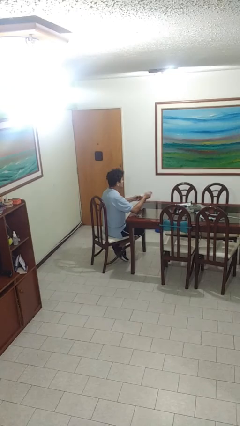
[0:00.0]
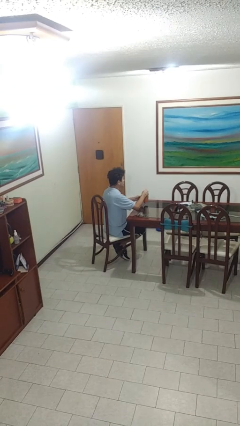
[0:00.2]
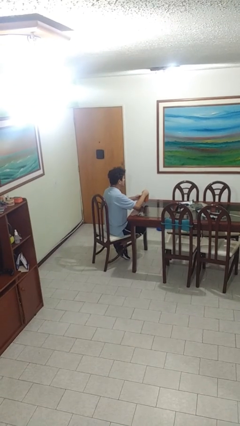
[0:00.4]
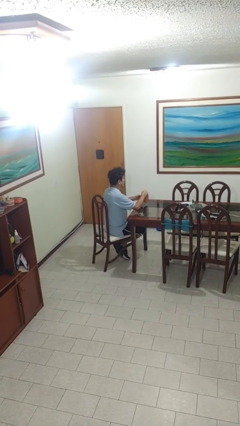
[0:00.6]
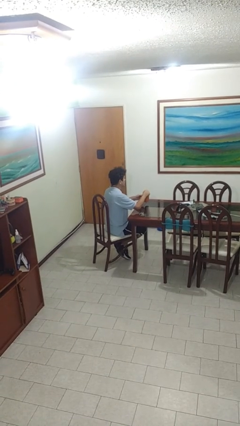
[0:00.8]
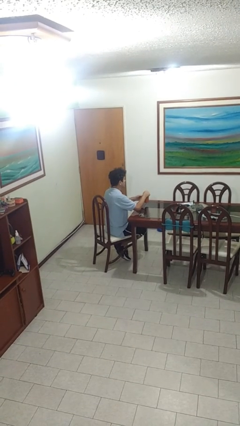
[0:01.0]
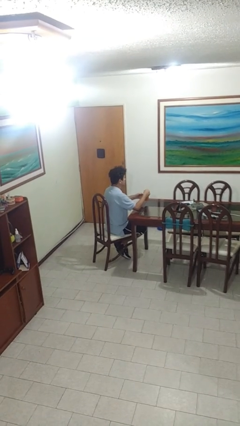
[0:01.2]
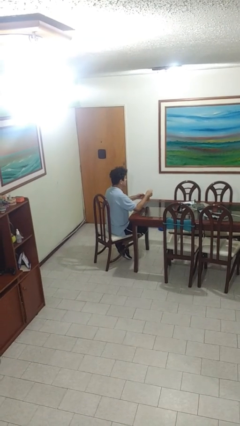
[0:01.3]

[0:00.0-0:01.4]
person stirs mug

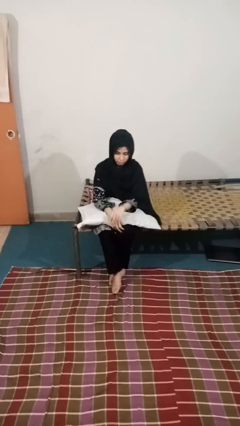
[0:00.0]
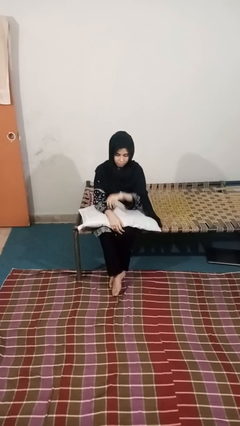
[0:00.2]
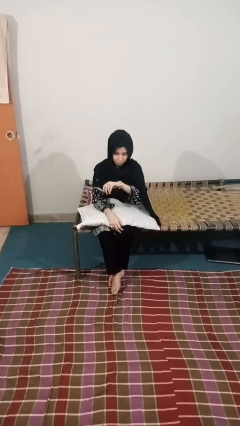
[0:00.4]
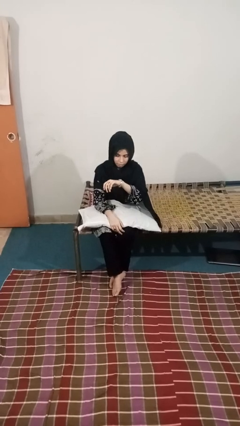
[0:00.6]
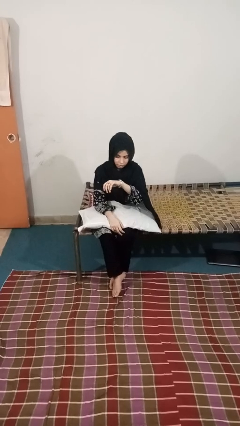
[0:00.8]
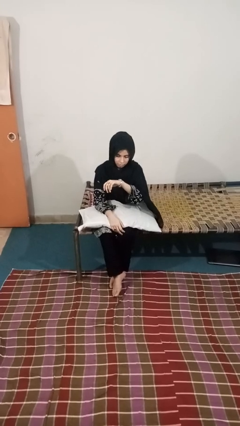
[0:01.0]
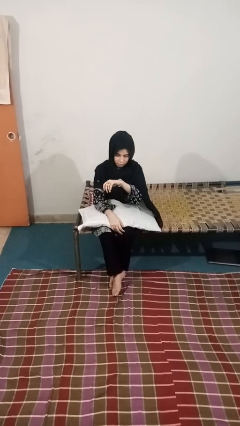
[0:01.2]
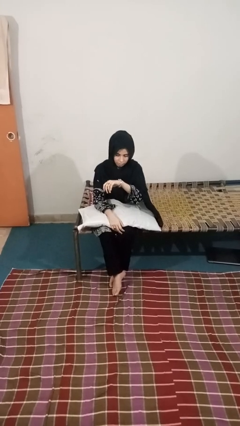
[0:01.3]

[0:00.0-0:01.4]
person looks at wristwatch

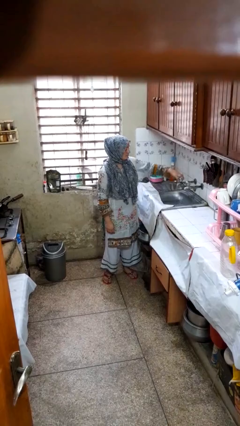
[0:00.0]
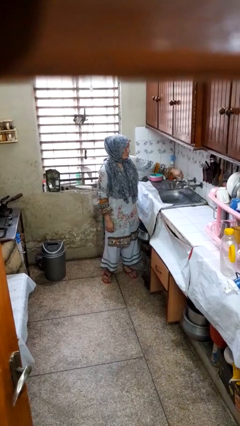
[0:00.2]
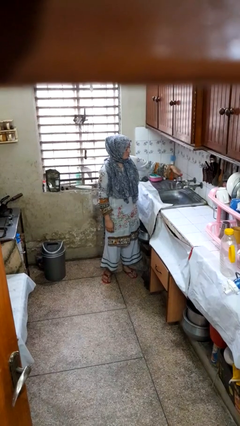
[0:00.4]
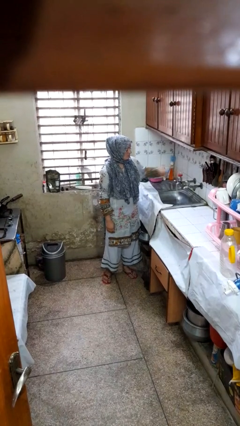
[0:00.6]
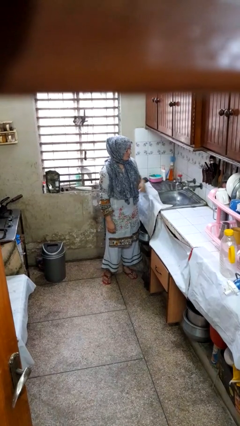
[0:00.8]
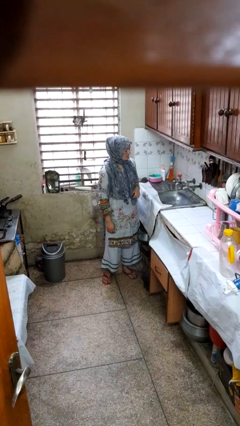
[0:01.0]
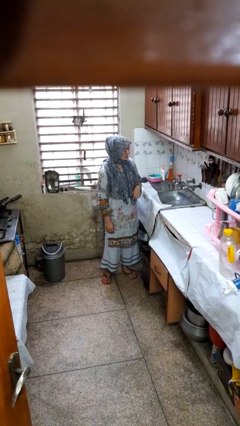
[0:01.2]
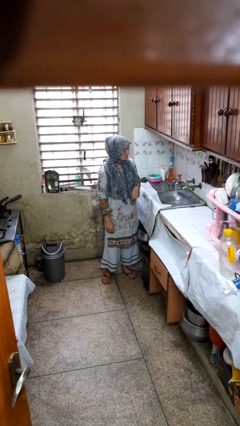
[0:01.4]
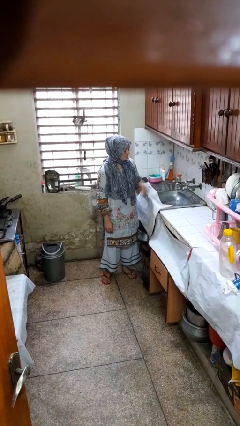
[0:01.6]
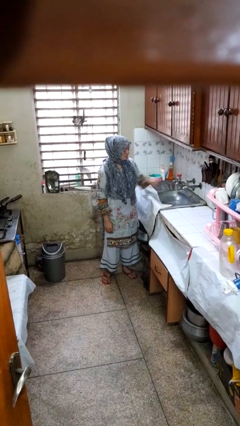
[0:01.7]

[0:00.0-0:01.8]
person turns on faucet

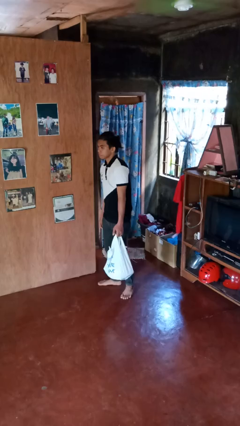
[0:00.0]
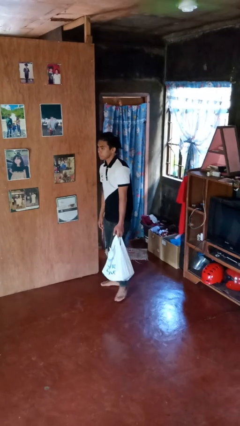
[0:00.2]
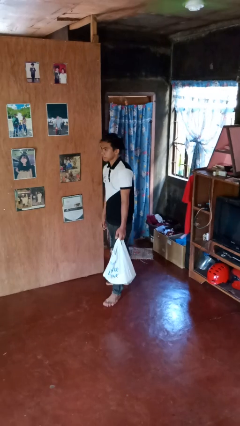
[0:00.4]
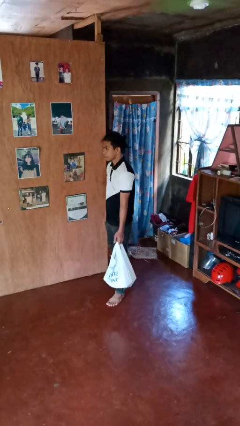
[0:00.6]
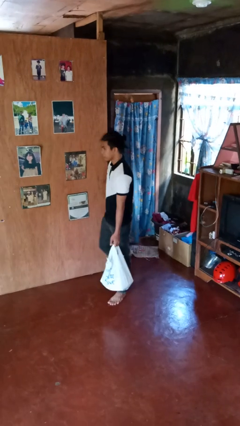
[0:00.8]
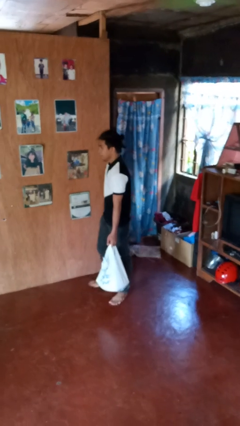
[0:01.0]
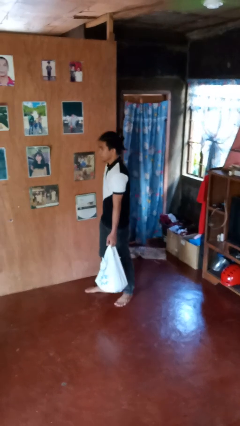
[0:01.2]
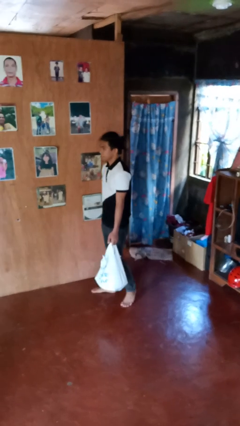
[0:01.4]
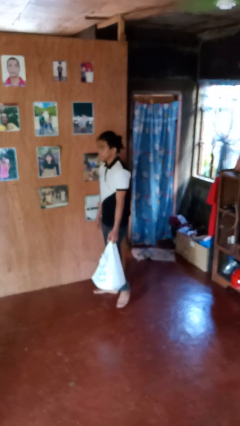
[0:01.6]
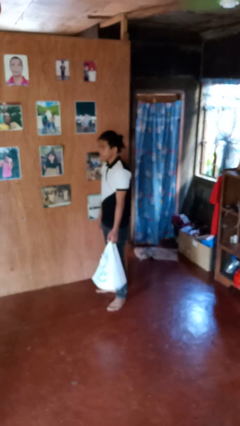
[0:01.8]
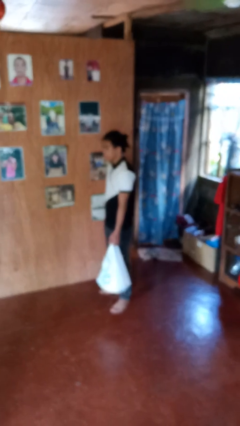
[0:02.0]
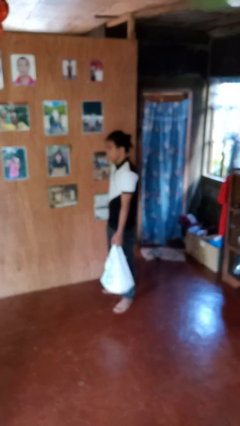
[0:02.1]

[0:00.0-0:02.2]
person carries groceries

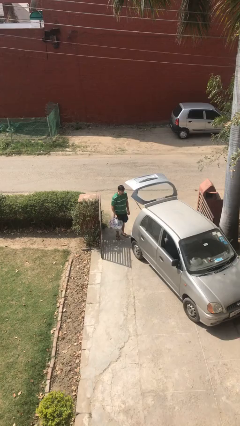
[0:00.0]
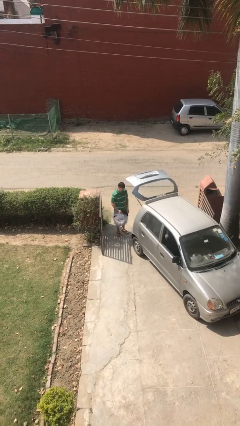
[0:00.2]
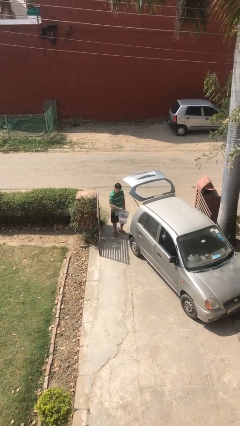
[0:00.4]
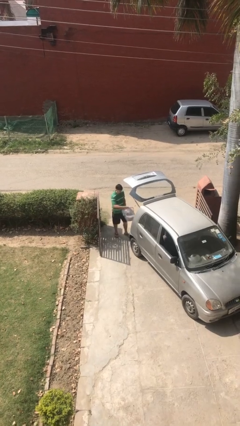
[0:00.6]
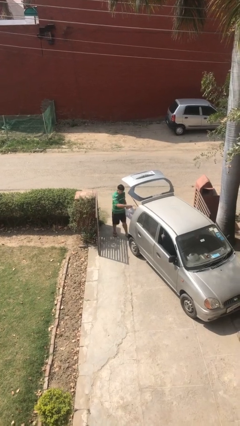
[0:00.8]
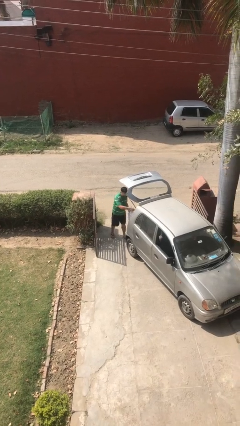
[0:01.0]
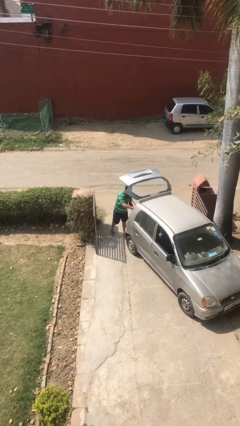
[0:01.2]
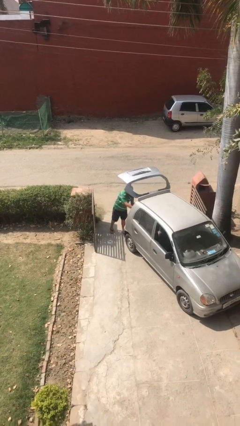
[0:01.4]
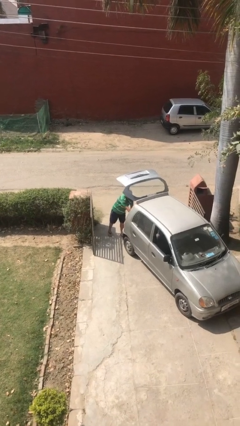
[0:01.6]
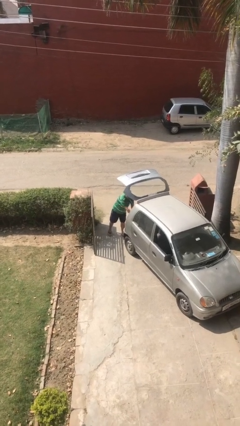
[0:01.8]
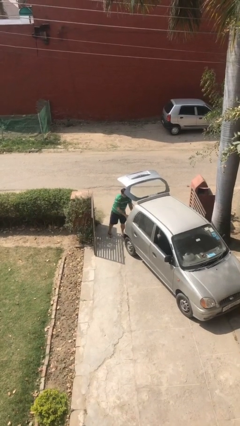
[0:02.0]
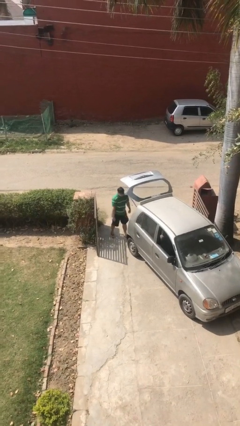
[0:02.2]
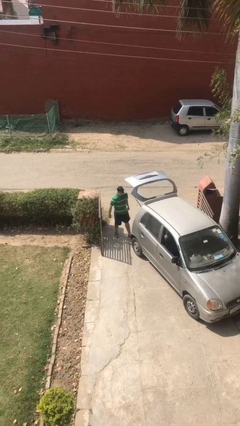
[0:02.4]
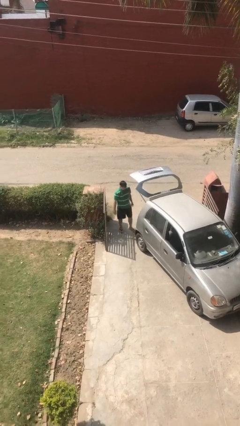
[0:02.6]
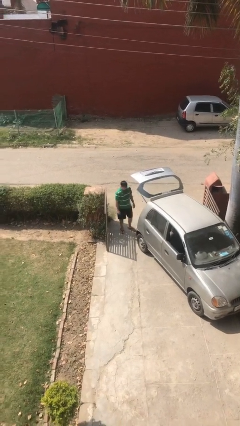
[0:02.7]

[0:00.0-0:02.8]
person loads car

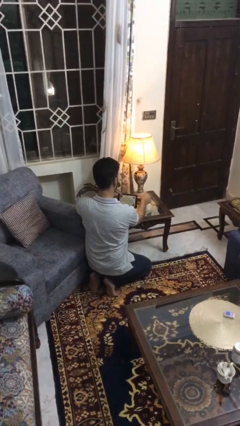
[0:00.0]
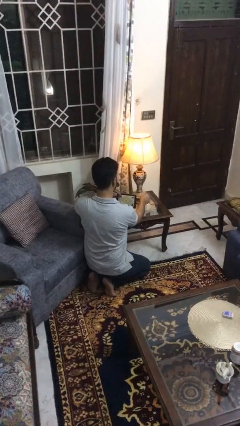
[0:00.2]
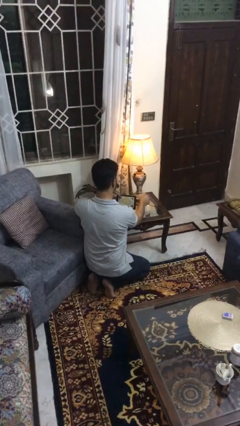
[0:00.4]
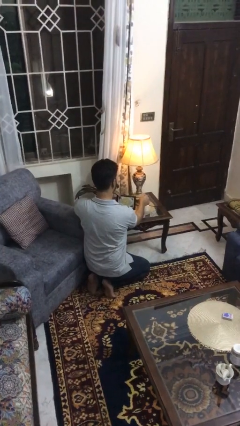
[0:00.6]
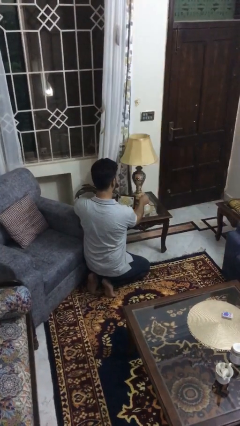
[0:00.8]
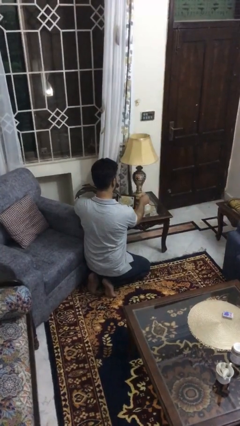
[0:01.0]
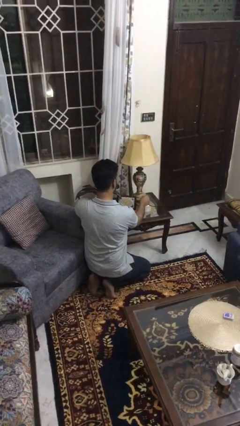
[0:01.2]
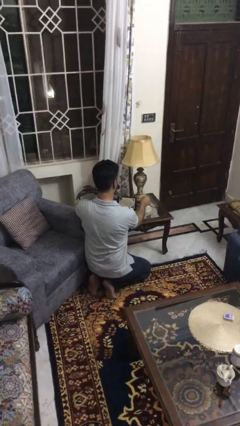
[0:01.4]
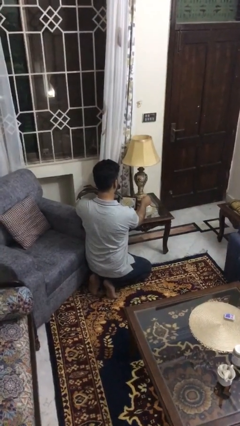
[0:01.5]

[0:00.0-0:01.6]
person turns off lamp

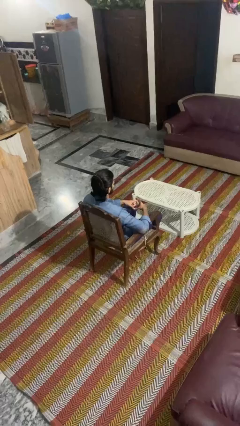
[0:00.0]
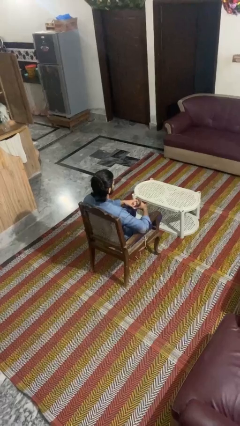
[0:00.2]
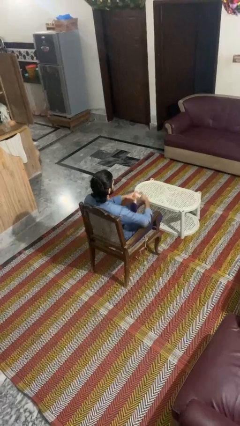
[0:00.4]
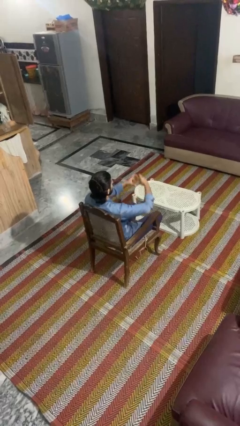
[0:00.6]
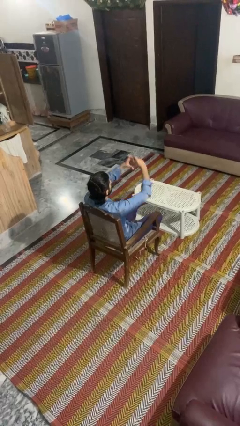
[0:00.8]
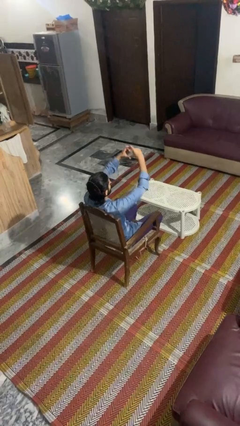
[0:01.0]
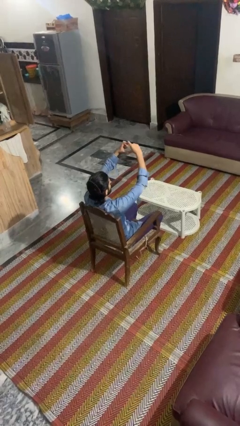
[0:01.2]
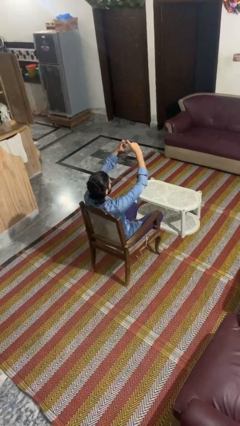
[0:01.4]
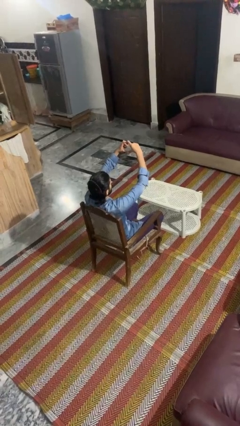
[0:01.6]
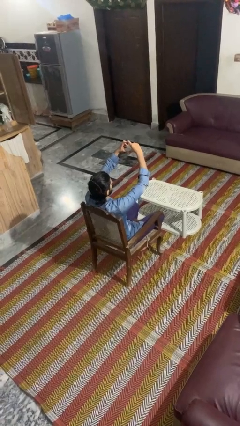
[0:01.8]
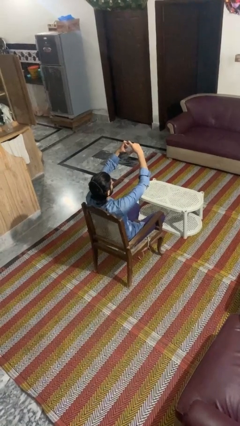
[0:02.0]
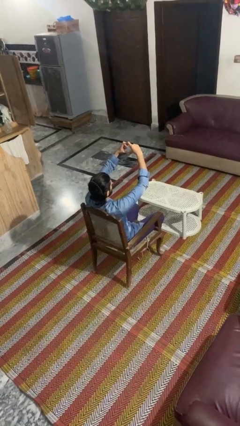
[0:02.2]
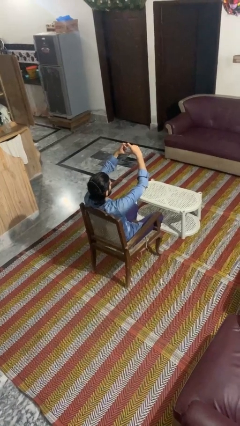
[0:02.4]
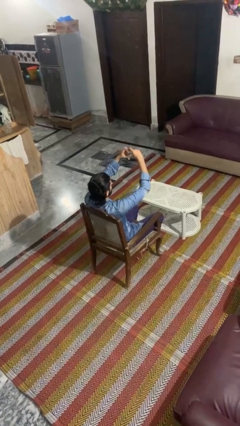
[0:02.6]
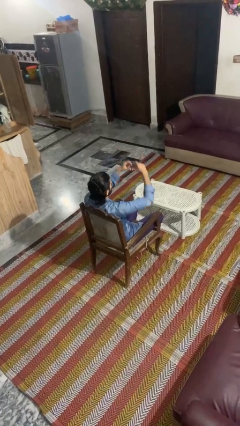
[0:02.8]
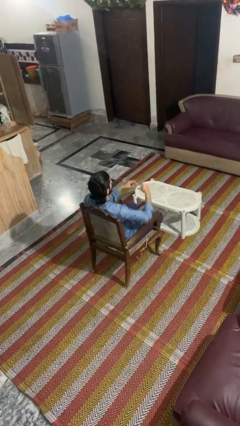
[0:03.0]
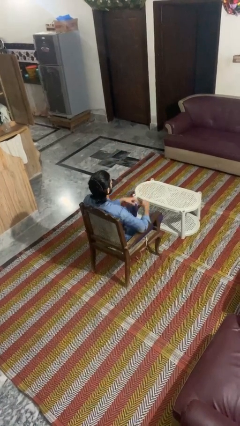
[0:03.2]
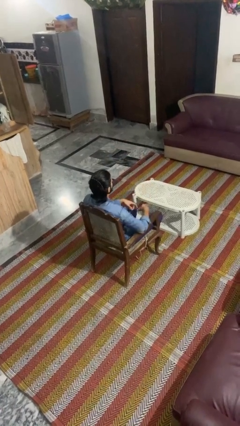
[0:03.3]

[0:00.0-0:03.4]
person gestures heart

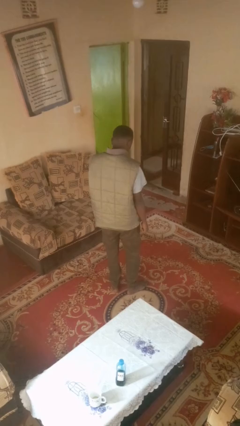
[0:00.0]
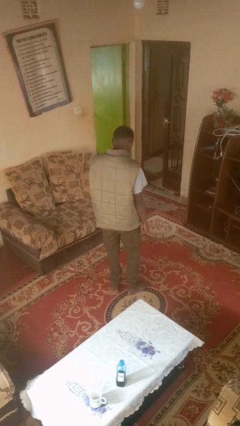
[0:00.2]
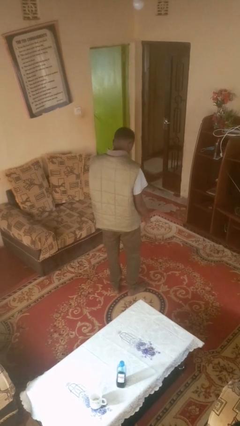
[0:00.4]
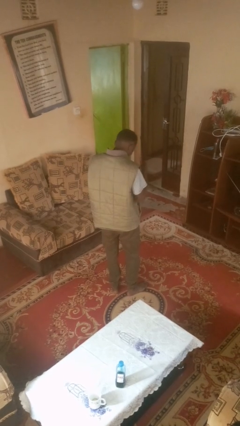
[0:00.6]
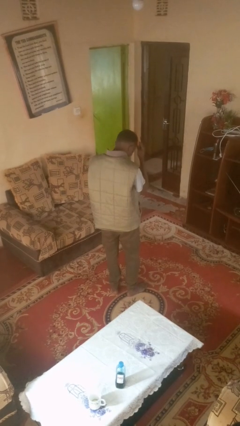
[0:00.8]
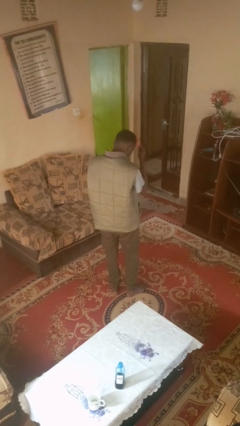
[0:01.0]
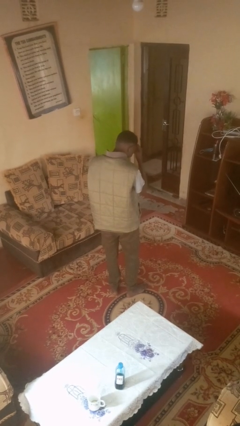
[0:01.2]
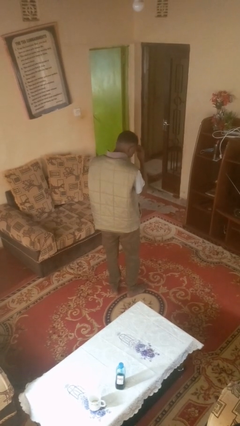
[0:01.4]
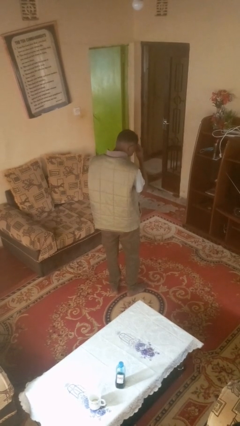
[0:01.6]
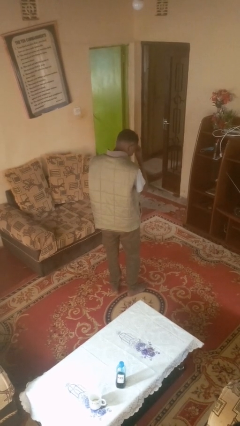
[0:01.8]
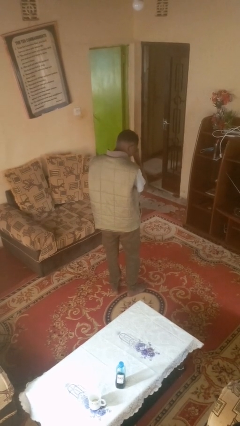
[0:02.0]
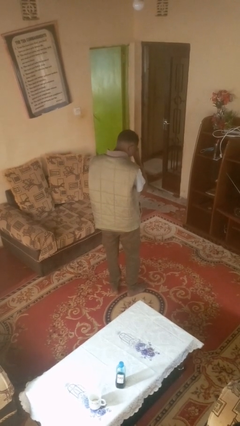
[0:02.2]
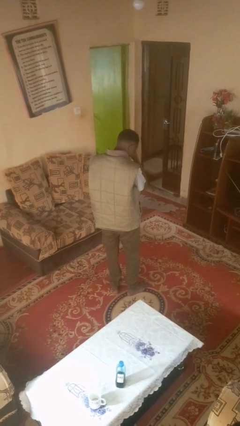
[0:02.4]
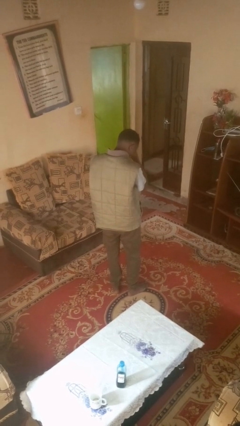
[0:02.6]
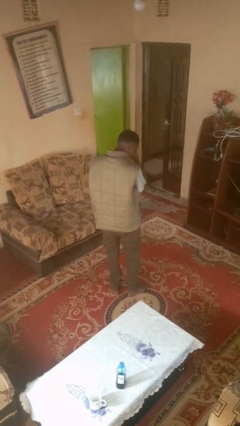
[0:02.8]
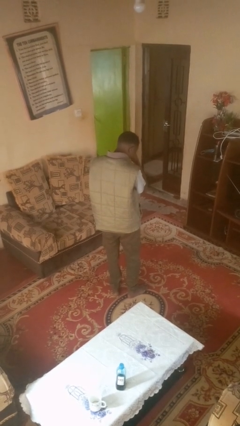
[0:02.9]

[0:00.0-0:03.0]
person brushes hair
